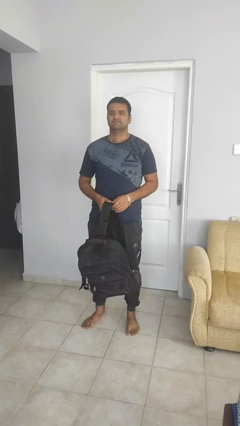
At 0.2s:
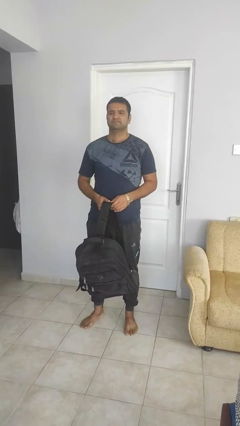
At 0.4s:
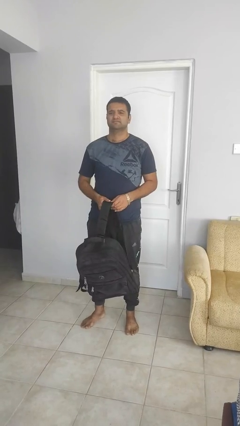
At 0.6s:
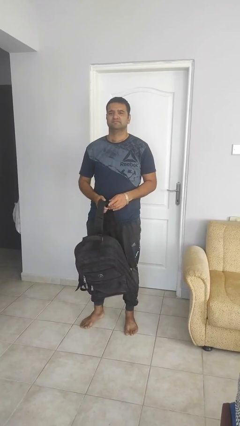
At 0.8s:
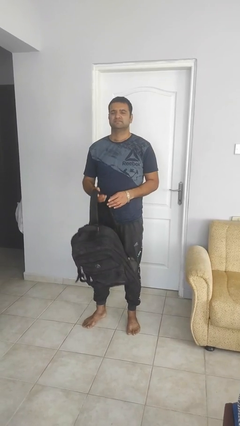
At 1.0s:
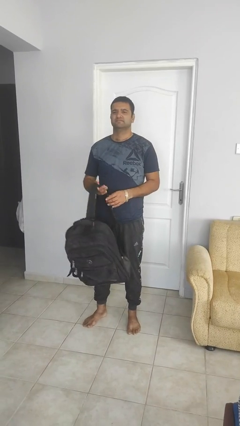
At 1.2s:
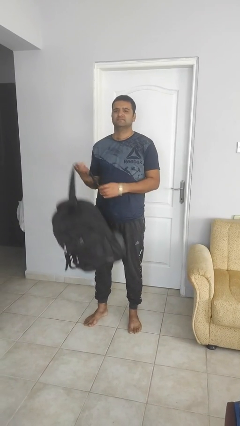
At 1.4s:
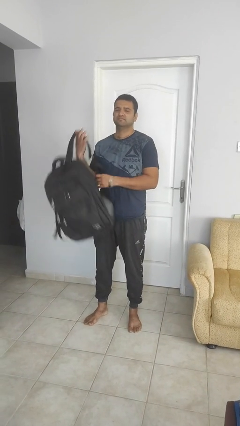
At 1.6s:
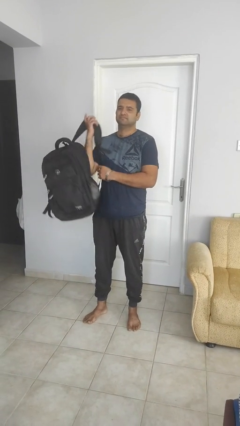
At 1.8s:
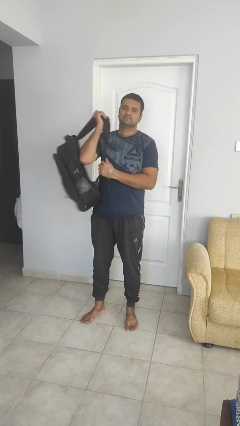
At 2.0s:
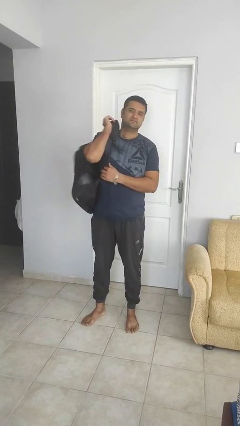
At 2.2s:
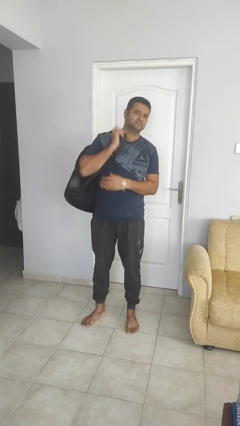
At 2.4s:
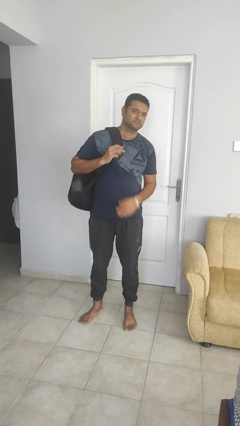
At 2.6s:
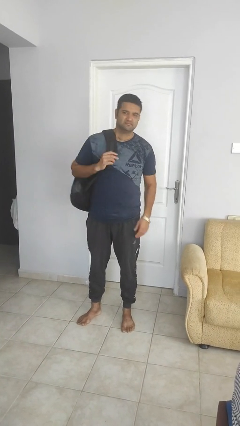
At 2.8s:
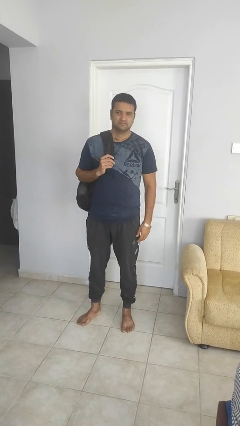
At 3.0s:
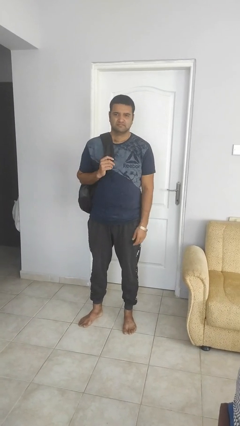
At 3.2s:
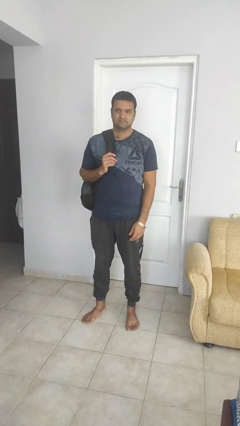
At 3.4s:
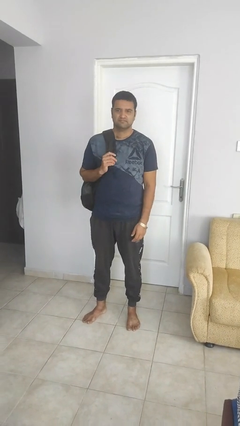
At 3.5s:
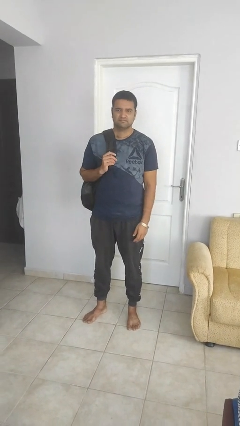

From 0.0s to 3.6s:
person puts on backpack

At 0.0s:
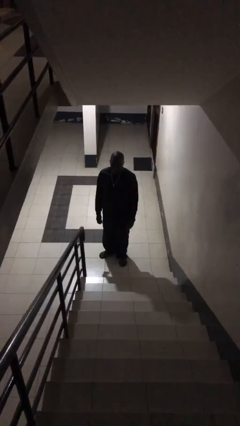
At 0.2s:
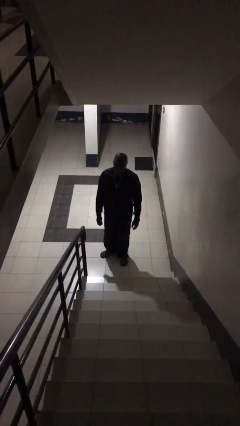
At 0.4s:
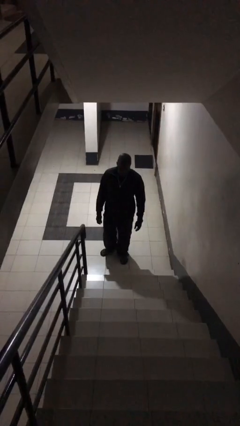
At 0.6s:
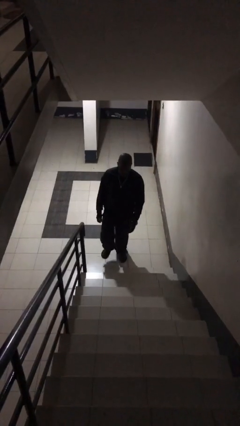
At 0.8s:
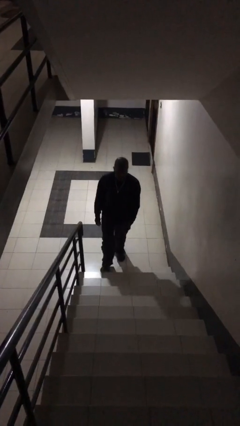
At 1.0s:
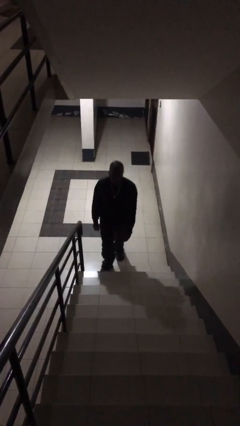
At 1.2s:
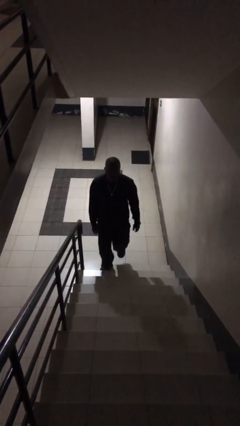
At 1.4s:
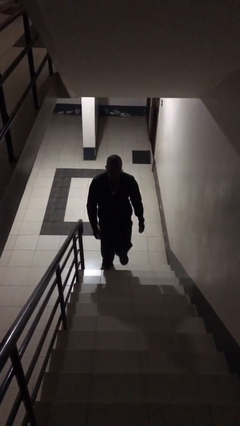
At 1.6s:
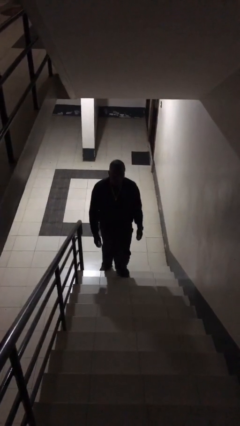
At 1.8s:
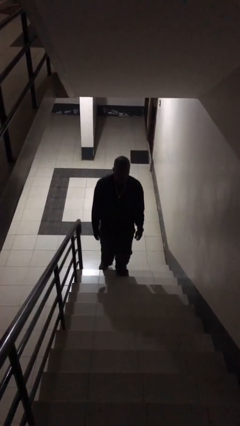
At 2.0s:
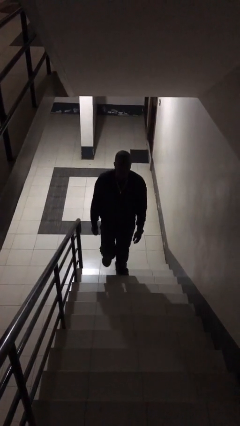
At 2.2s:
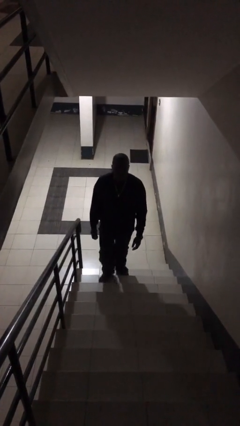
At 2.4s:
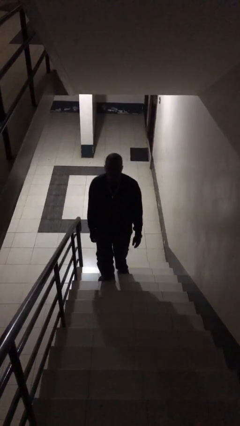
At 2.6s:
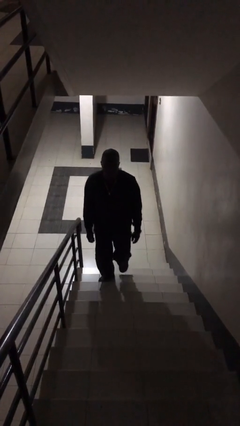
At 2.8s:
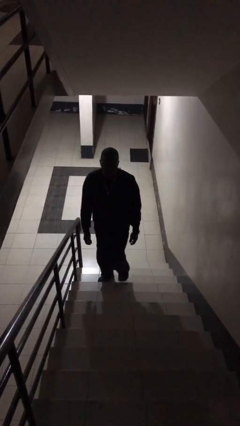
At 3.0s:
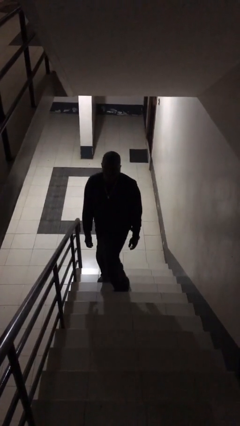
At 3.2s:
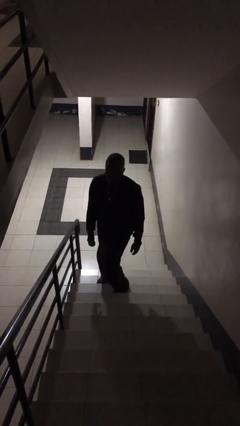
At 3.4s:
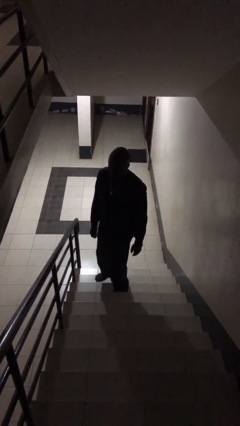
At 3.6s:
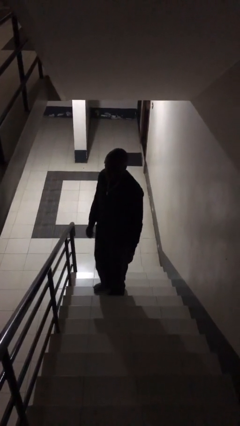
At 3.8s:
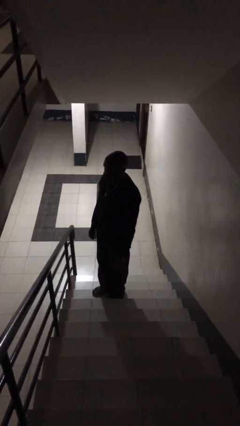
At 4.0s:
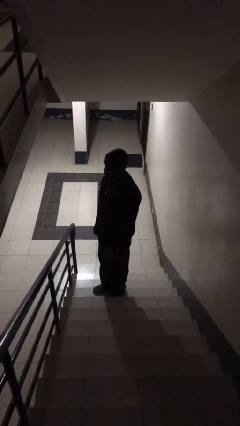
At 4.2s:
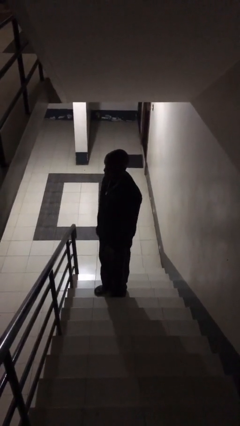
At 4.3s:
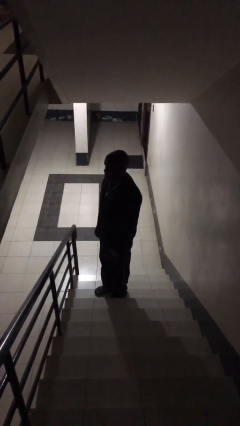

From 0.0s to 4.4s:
person climbs up stairs

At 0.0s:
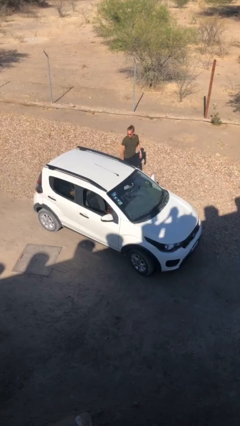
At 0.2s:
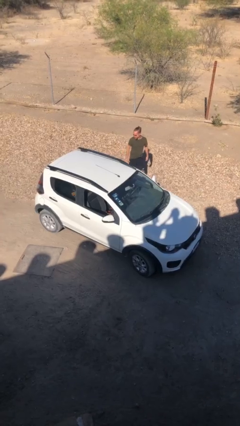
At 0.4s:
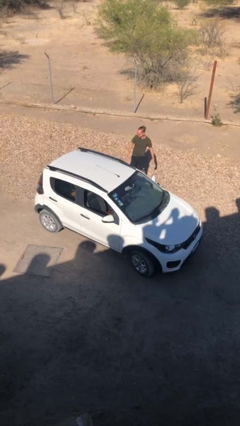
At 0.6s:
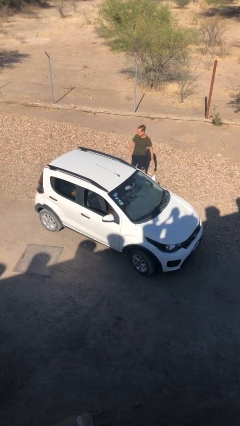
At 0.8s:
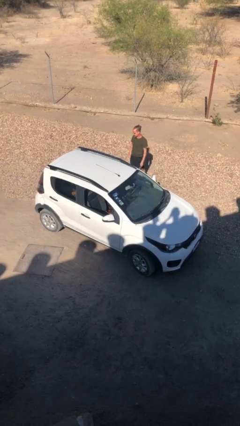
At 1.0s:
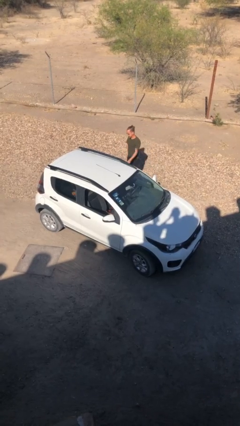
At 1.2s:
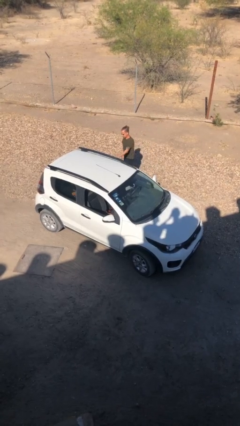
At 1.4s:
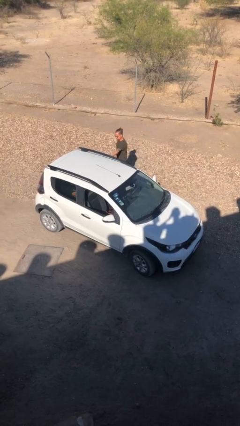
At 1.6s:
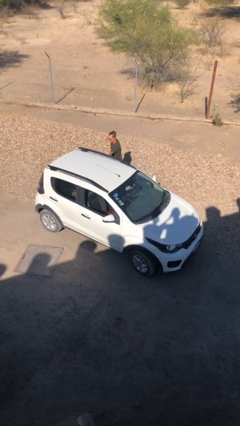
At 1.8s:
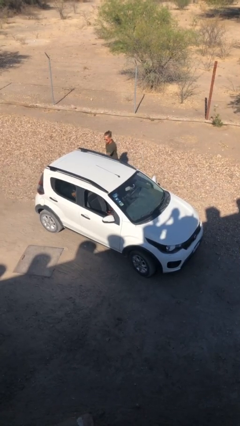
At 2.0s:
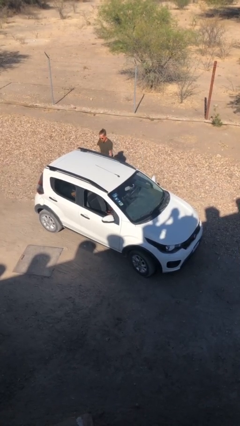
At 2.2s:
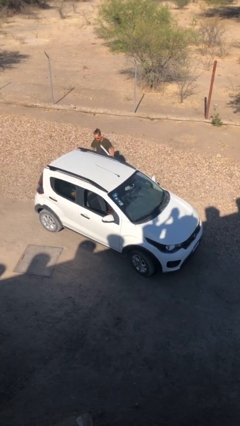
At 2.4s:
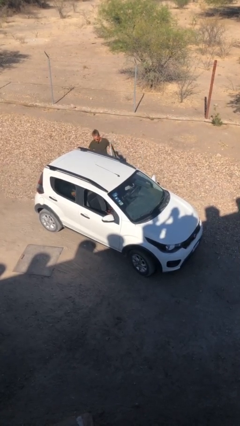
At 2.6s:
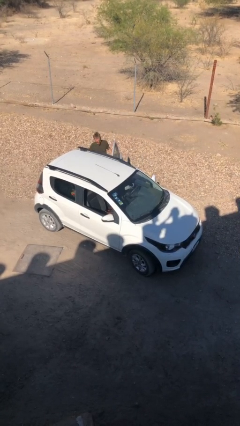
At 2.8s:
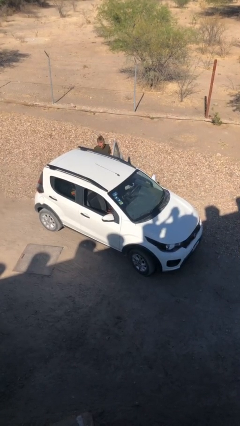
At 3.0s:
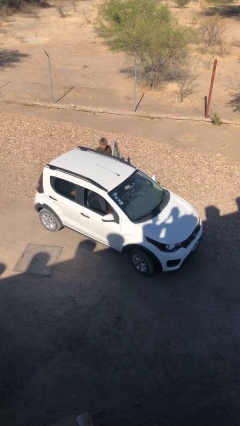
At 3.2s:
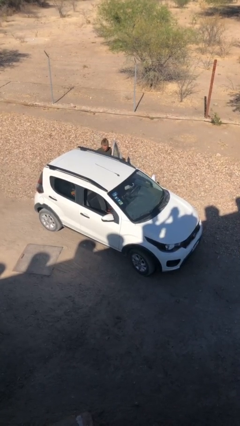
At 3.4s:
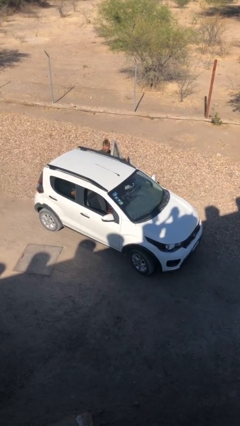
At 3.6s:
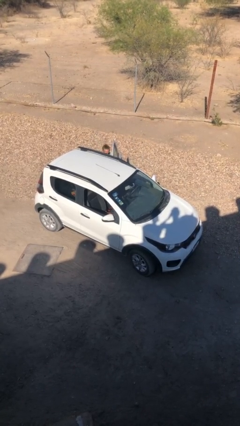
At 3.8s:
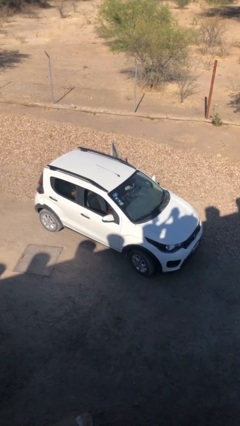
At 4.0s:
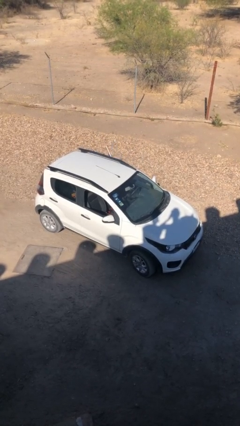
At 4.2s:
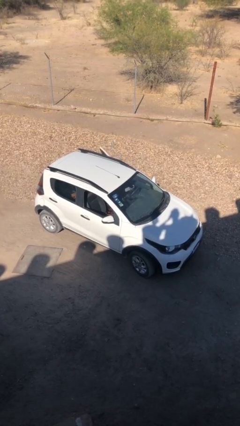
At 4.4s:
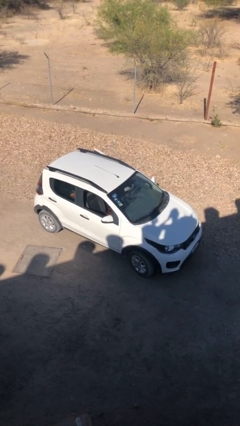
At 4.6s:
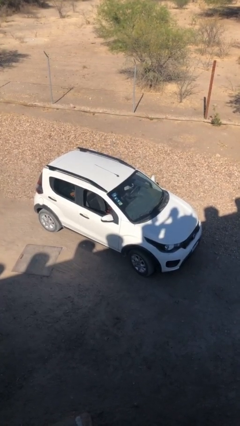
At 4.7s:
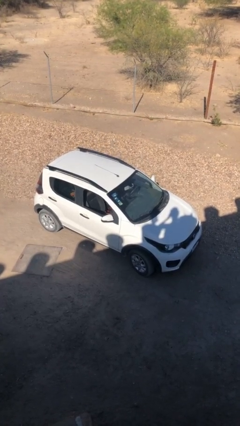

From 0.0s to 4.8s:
car picks up person

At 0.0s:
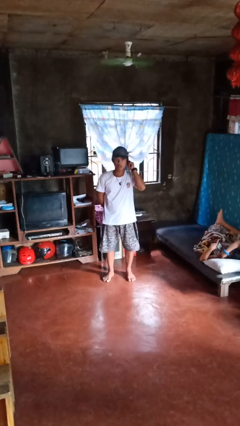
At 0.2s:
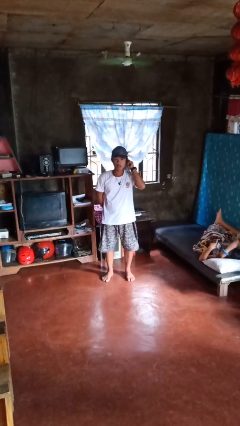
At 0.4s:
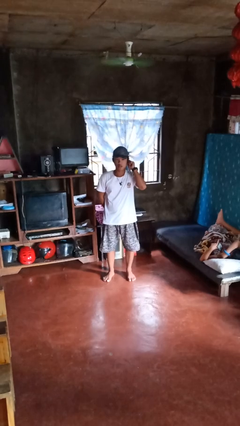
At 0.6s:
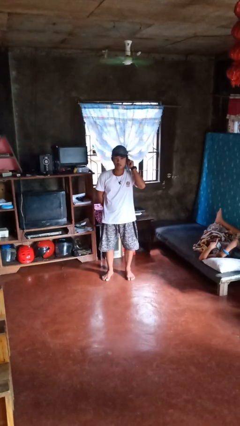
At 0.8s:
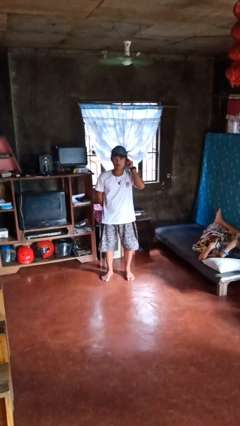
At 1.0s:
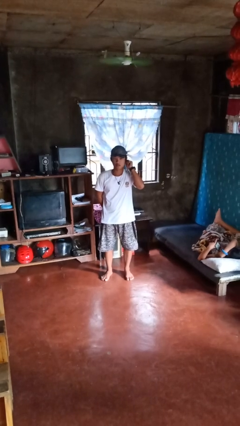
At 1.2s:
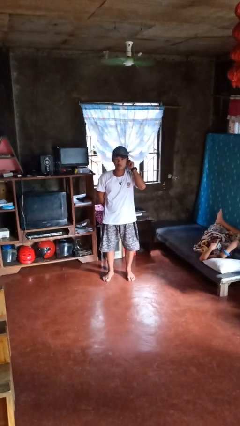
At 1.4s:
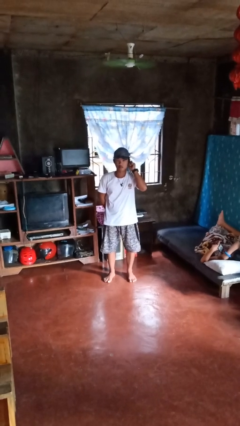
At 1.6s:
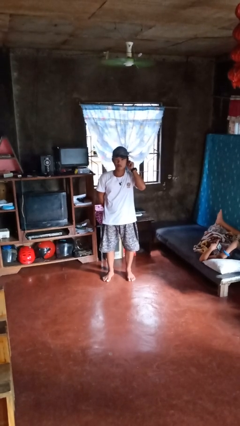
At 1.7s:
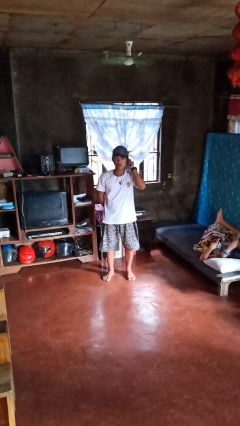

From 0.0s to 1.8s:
person touches earlobe

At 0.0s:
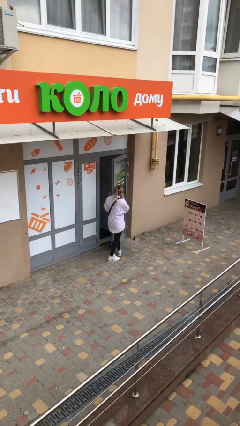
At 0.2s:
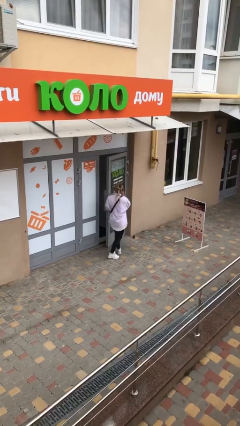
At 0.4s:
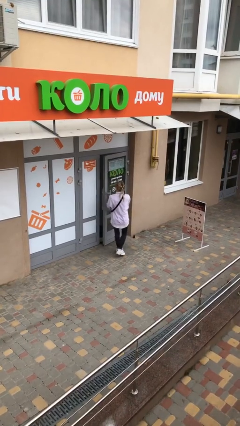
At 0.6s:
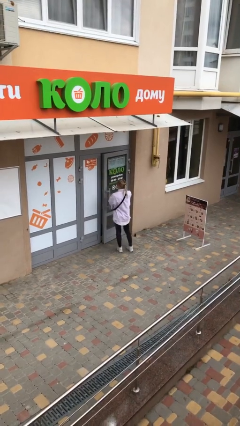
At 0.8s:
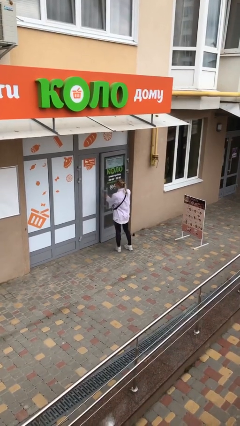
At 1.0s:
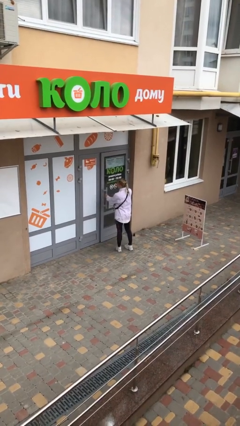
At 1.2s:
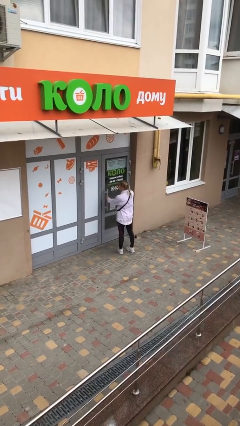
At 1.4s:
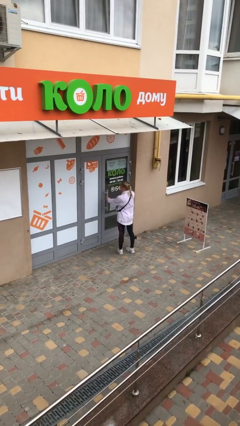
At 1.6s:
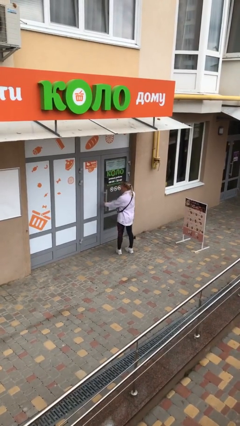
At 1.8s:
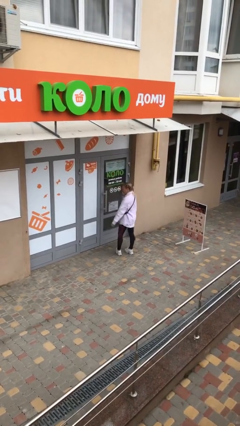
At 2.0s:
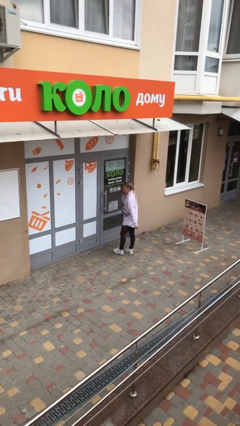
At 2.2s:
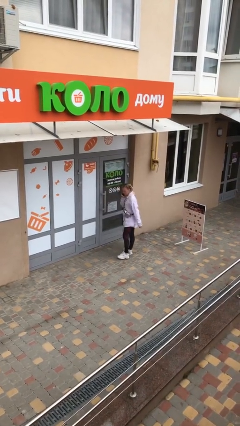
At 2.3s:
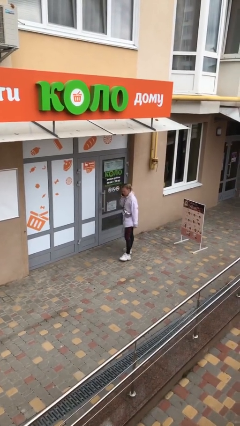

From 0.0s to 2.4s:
person closes facility door

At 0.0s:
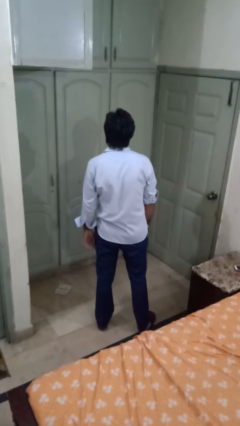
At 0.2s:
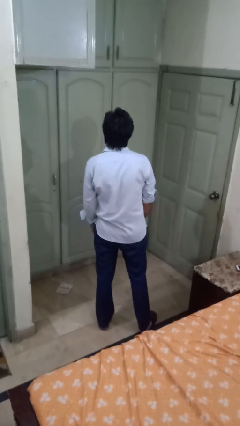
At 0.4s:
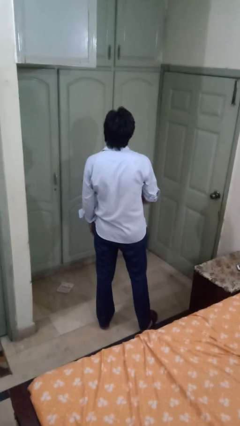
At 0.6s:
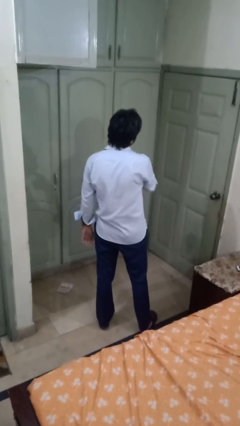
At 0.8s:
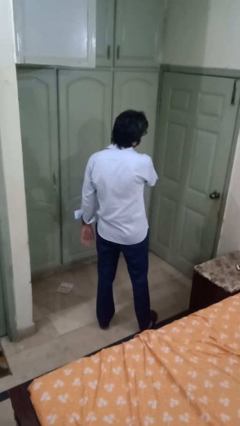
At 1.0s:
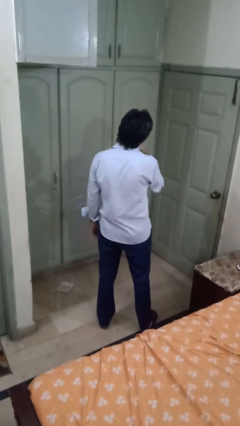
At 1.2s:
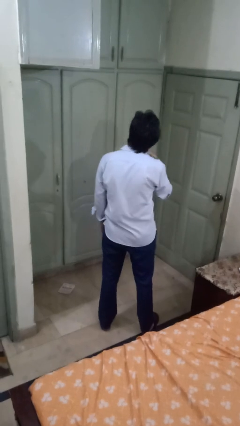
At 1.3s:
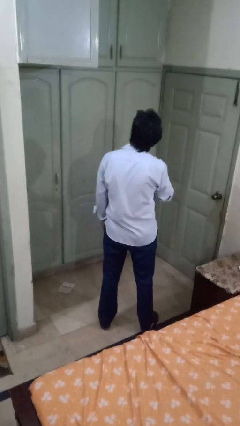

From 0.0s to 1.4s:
person gestures cut
